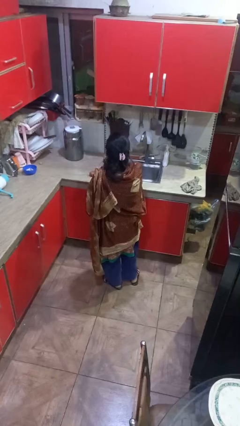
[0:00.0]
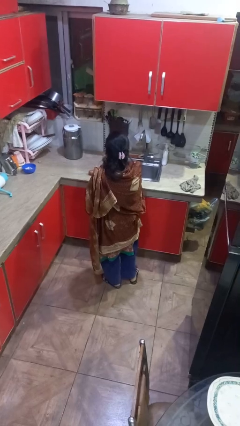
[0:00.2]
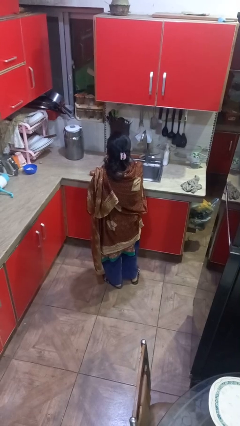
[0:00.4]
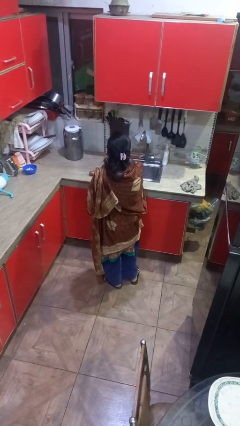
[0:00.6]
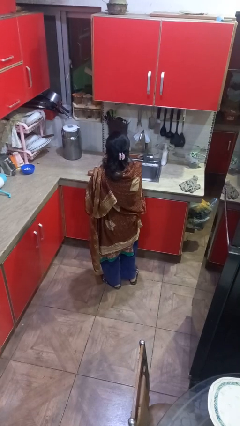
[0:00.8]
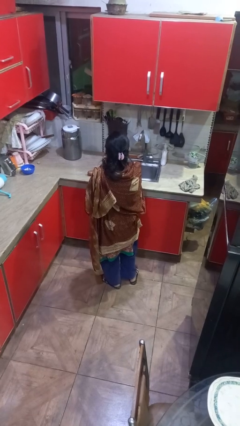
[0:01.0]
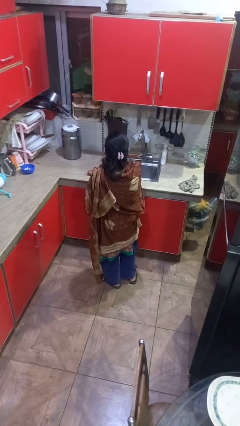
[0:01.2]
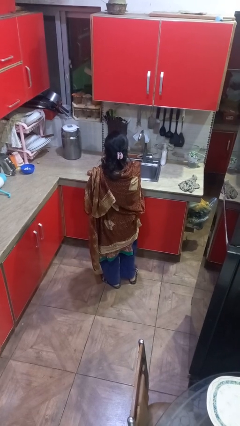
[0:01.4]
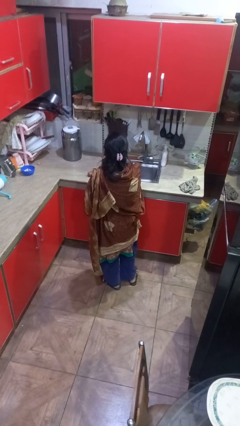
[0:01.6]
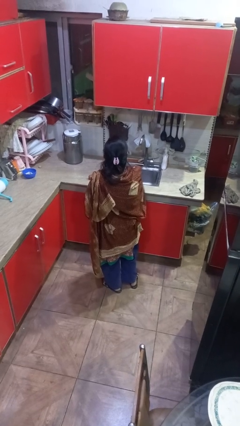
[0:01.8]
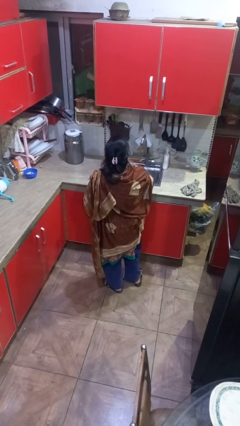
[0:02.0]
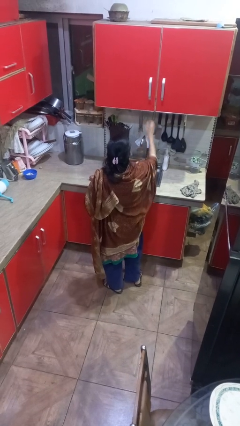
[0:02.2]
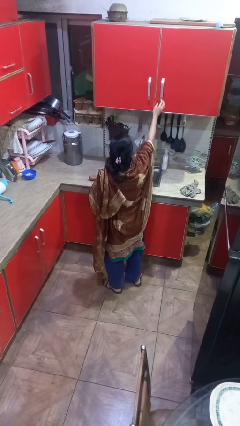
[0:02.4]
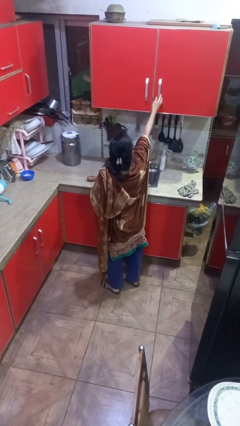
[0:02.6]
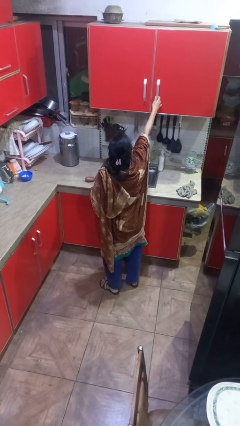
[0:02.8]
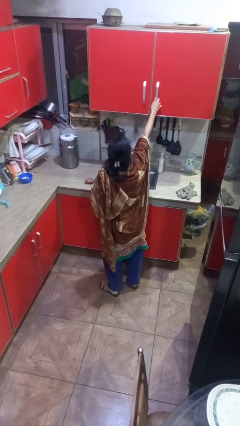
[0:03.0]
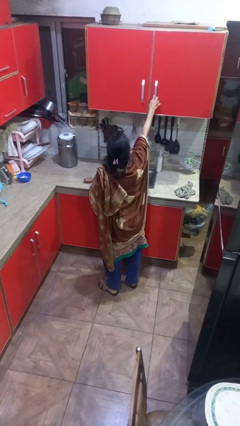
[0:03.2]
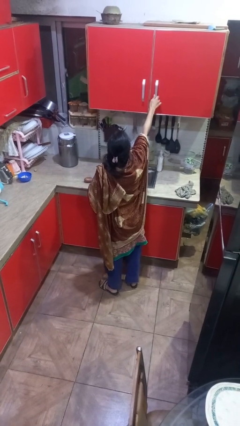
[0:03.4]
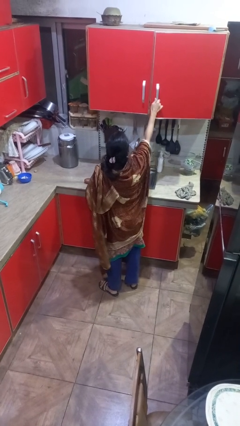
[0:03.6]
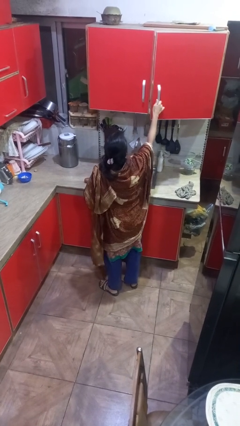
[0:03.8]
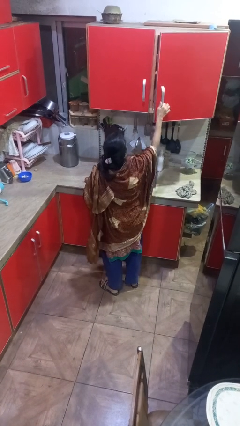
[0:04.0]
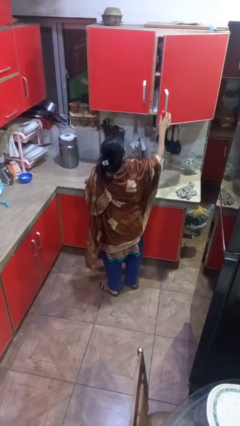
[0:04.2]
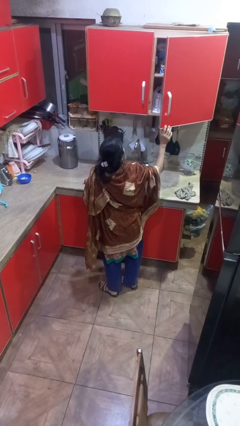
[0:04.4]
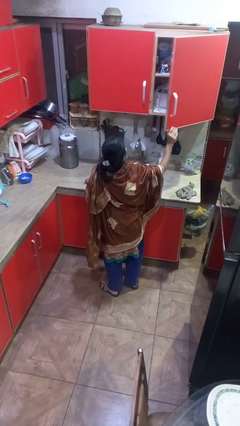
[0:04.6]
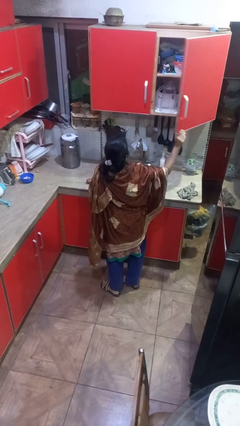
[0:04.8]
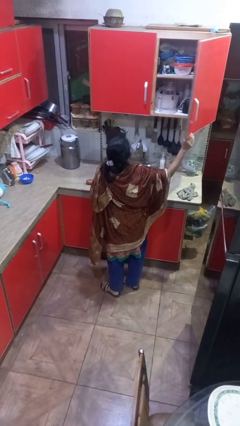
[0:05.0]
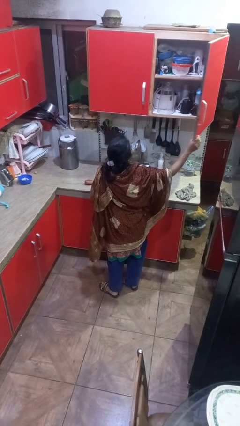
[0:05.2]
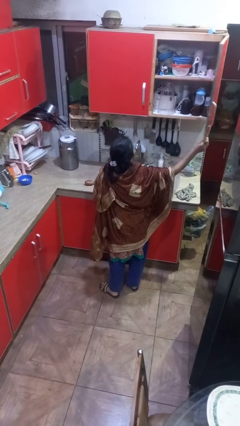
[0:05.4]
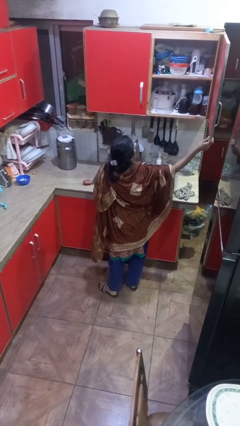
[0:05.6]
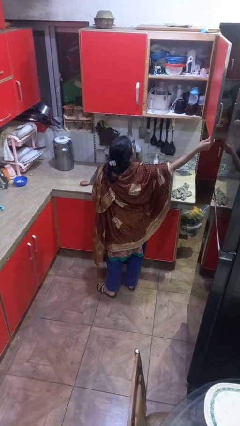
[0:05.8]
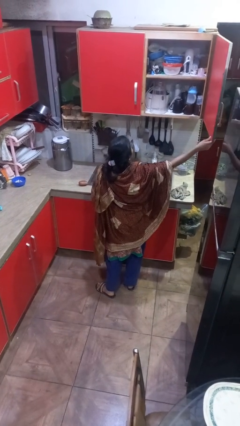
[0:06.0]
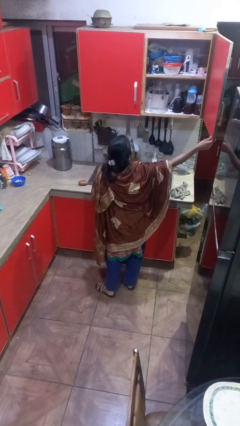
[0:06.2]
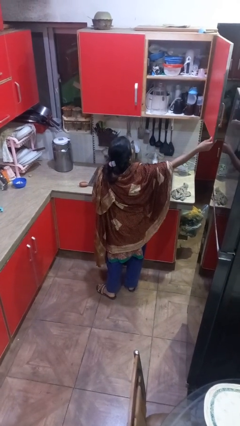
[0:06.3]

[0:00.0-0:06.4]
person opens cabinet

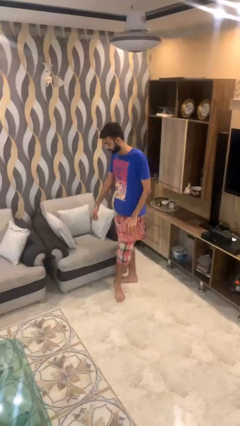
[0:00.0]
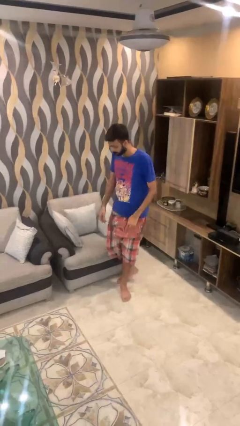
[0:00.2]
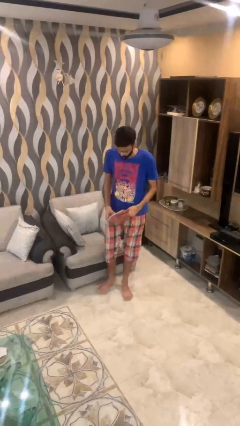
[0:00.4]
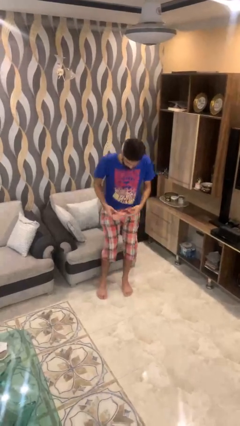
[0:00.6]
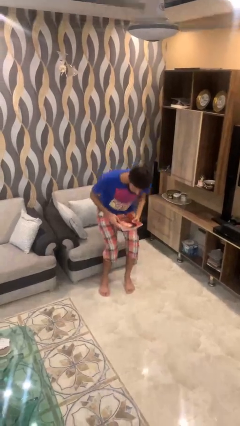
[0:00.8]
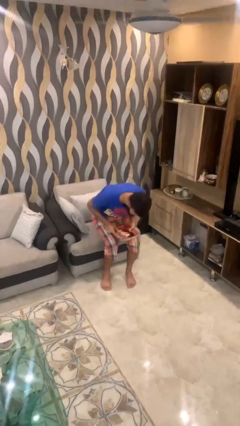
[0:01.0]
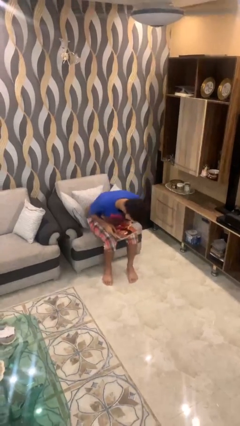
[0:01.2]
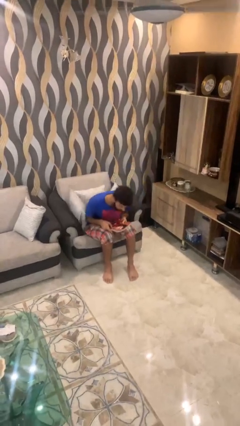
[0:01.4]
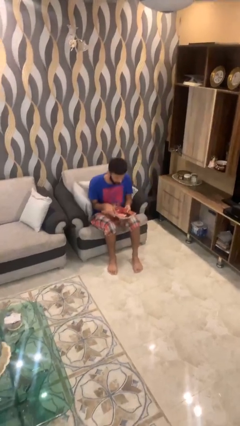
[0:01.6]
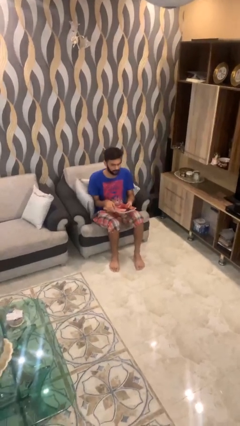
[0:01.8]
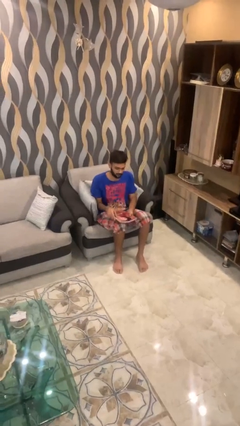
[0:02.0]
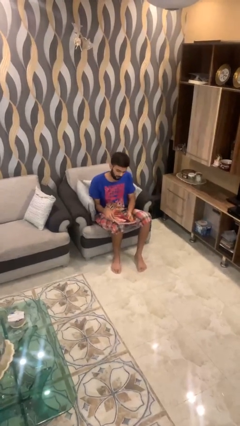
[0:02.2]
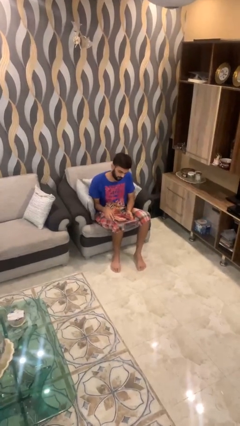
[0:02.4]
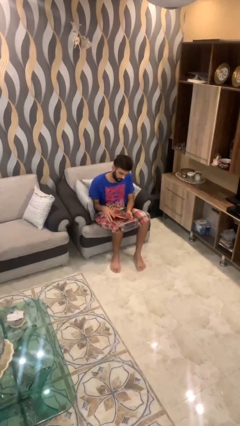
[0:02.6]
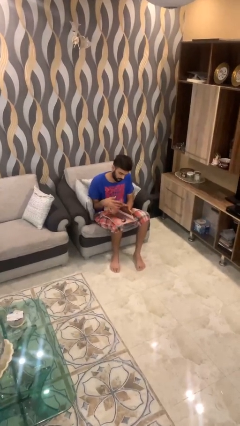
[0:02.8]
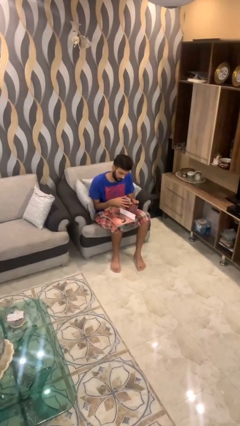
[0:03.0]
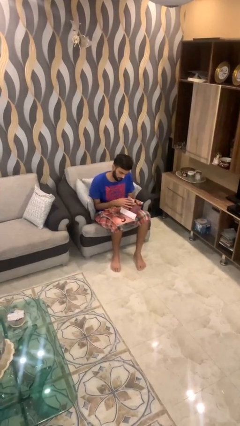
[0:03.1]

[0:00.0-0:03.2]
person sits down

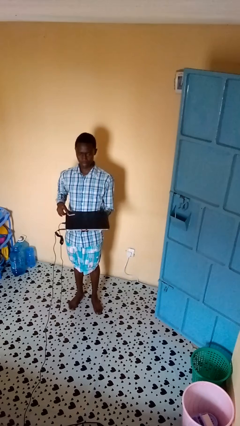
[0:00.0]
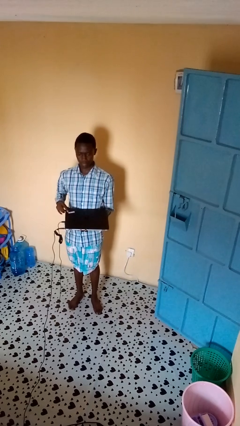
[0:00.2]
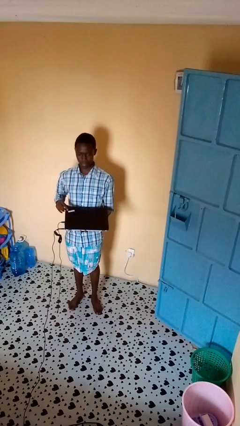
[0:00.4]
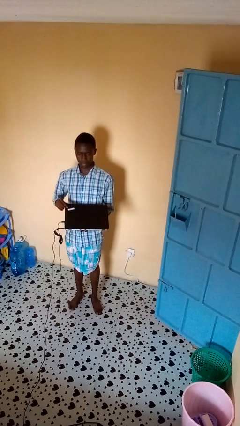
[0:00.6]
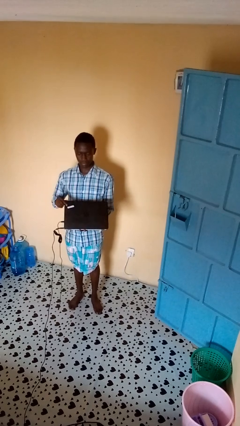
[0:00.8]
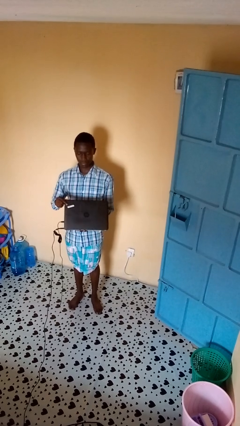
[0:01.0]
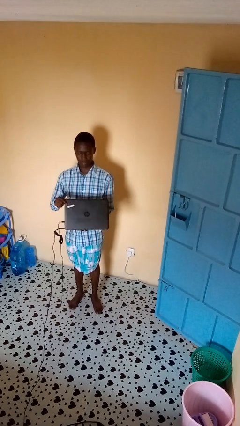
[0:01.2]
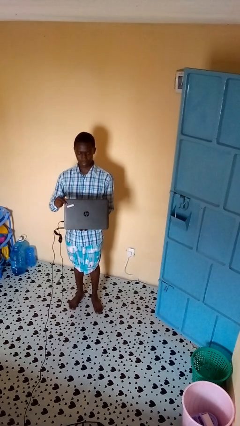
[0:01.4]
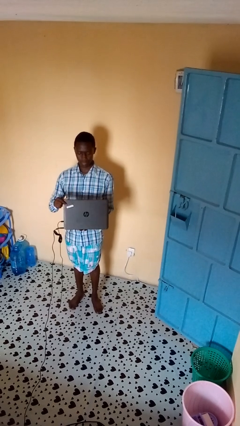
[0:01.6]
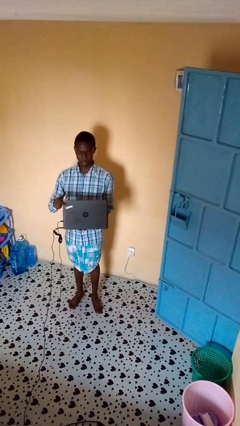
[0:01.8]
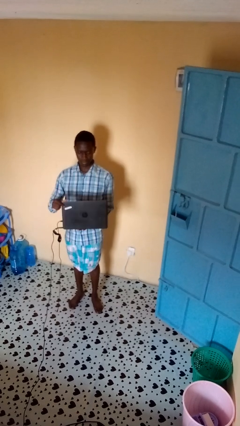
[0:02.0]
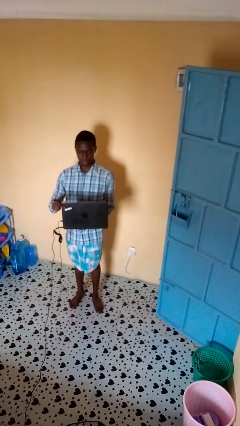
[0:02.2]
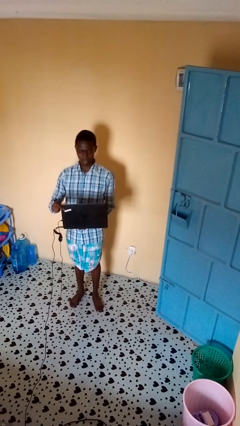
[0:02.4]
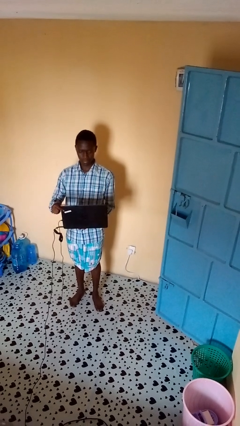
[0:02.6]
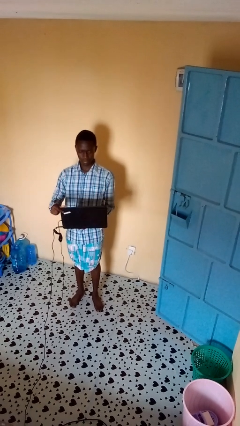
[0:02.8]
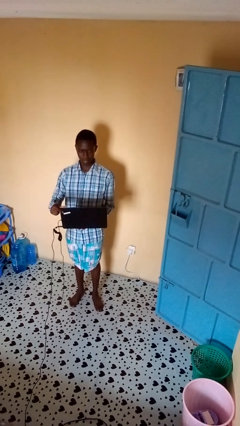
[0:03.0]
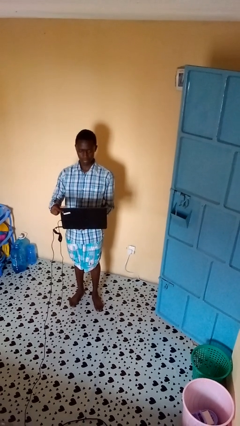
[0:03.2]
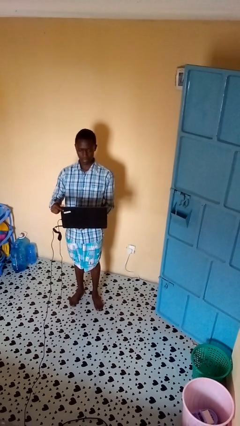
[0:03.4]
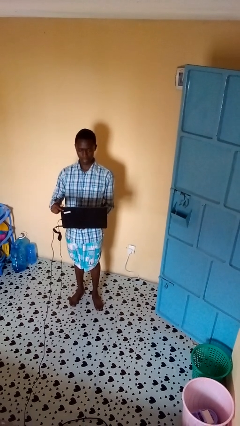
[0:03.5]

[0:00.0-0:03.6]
person opens laptop

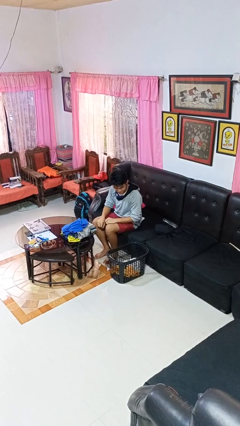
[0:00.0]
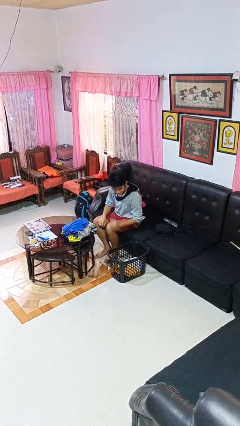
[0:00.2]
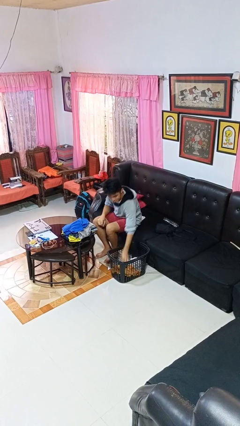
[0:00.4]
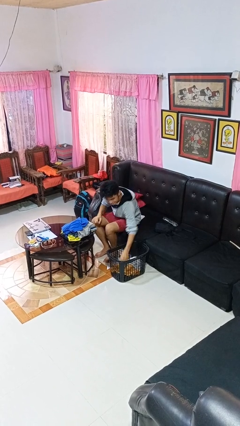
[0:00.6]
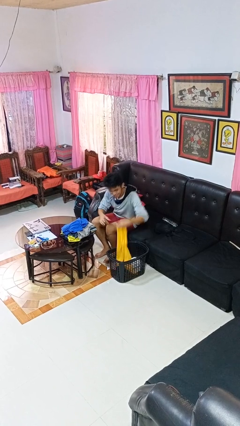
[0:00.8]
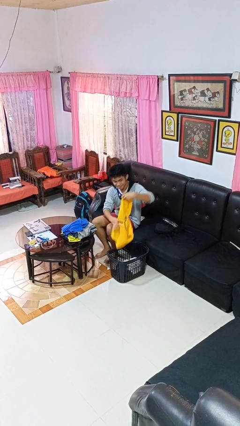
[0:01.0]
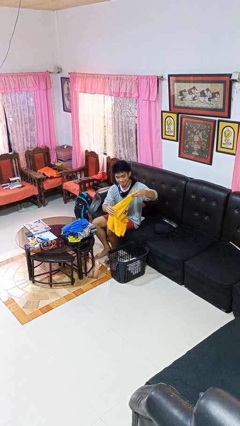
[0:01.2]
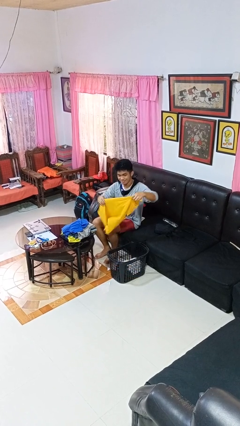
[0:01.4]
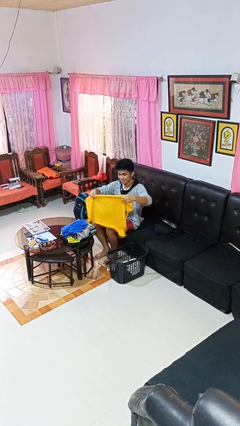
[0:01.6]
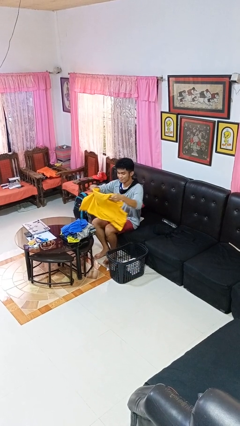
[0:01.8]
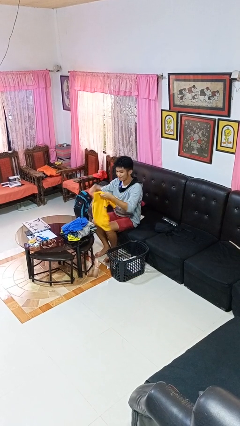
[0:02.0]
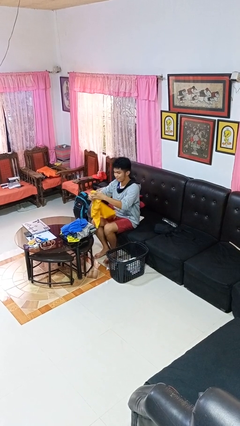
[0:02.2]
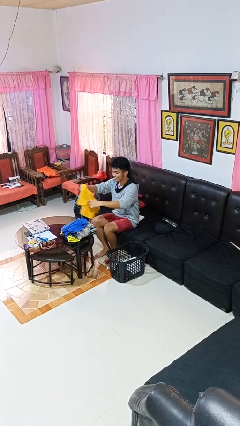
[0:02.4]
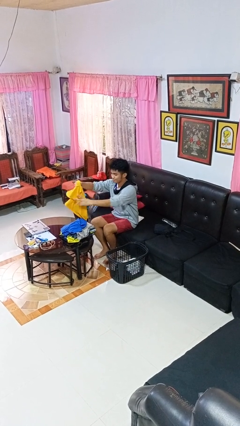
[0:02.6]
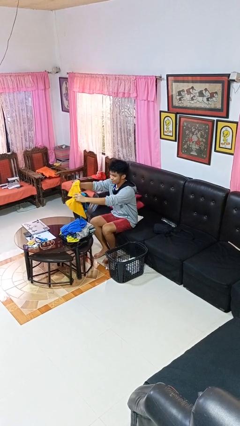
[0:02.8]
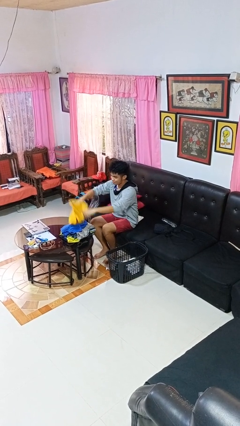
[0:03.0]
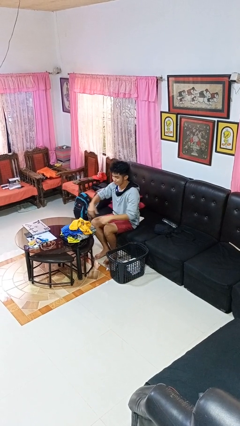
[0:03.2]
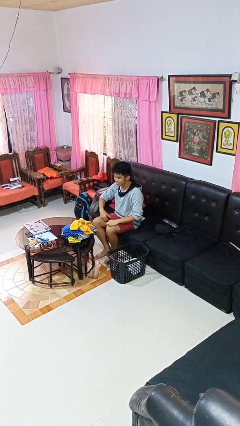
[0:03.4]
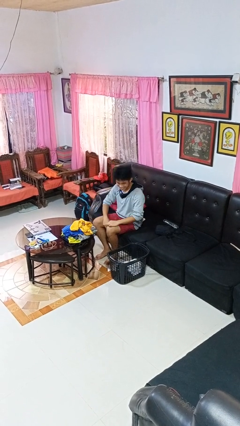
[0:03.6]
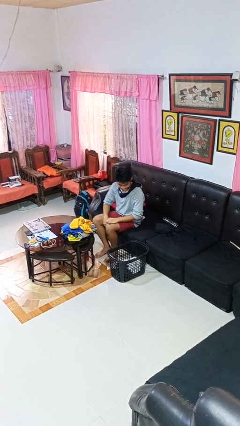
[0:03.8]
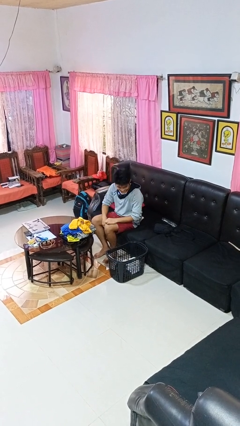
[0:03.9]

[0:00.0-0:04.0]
person folds shirt

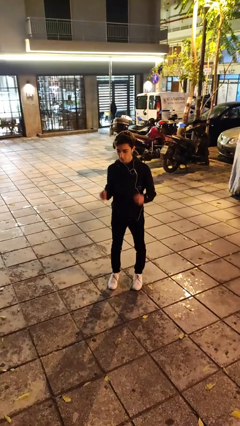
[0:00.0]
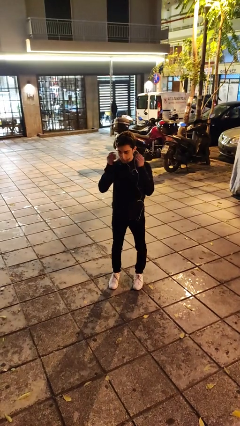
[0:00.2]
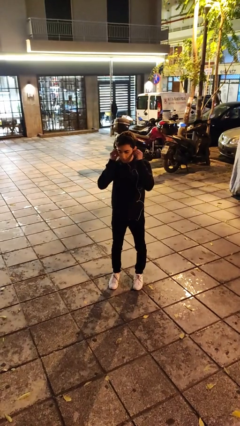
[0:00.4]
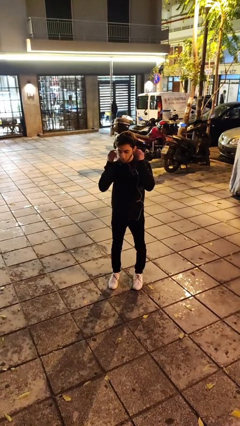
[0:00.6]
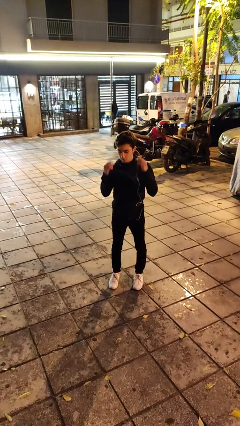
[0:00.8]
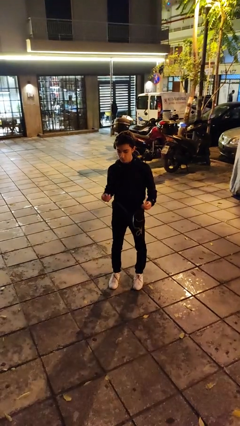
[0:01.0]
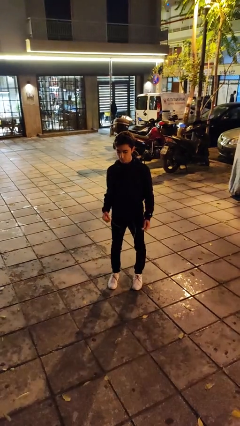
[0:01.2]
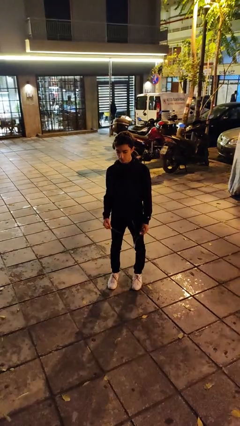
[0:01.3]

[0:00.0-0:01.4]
person takes off headphones
